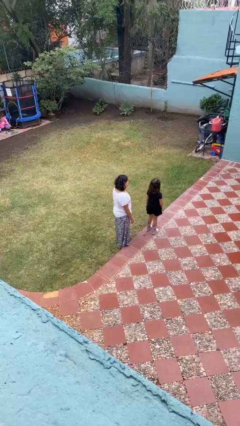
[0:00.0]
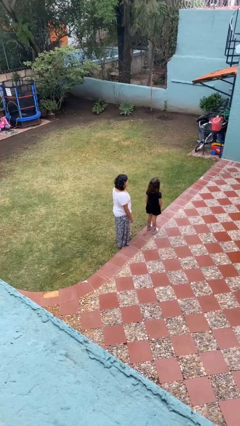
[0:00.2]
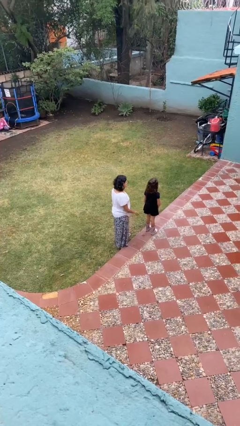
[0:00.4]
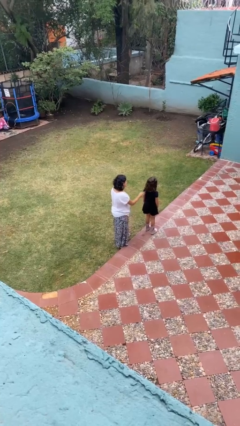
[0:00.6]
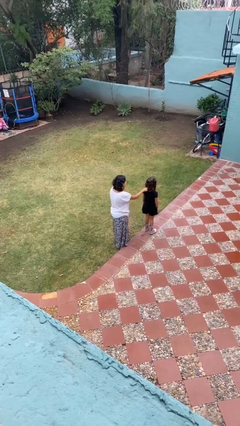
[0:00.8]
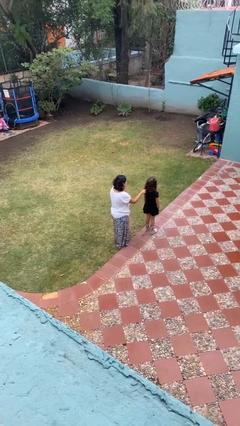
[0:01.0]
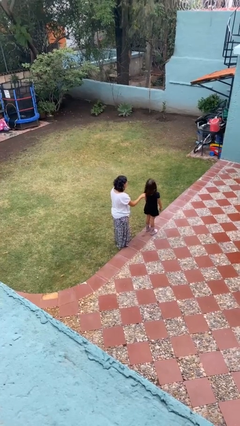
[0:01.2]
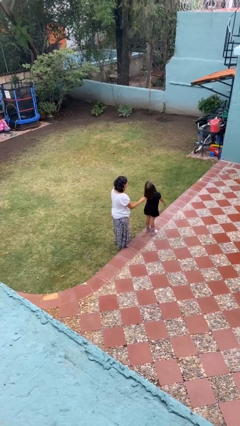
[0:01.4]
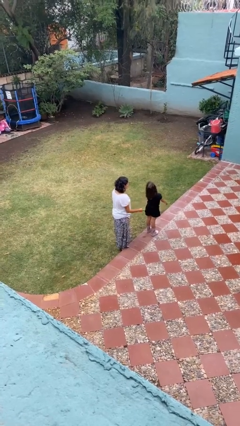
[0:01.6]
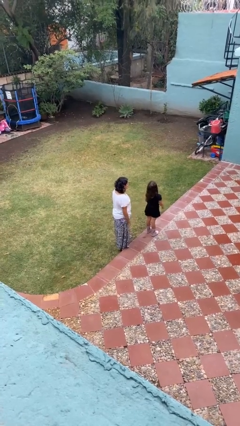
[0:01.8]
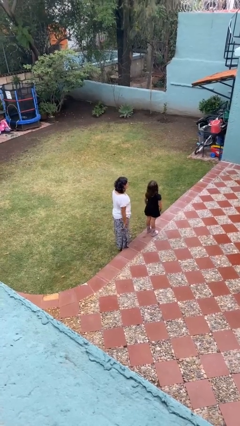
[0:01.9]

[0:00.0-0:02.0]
person grabs person by hair

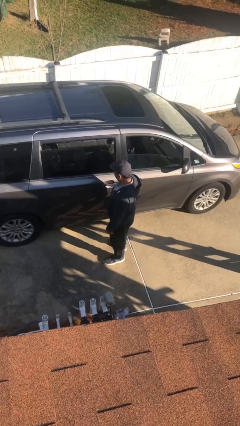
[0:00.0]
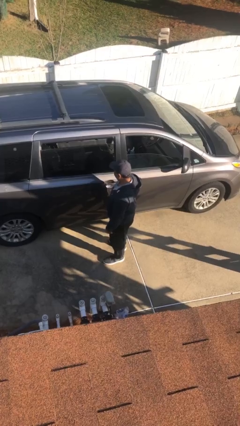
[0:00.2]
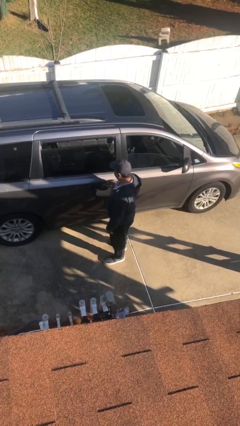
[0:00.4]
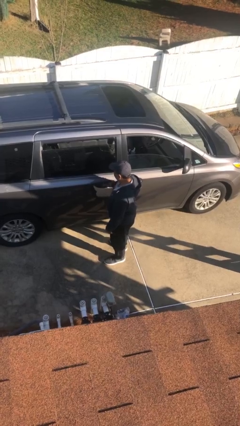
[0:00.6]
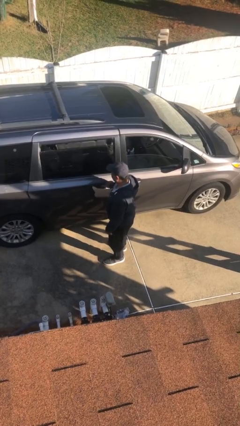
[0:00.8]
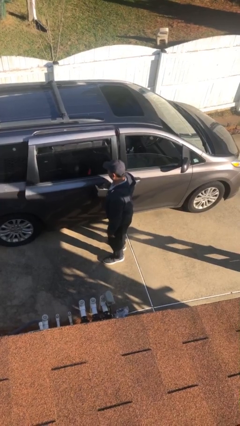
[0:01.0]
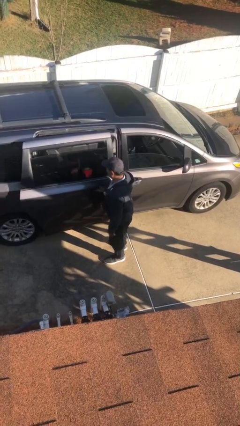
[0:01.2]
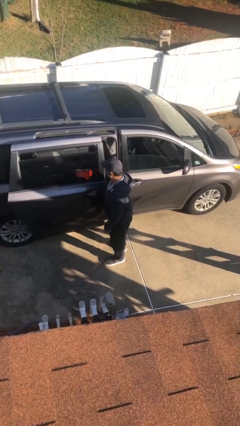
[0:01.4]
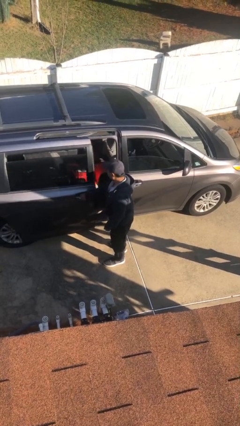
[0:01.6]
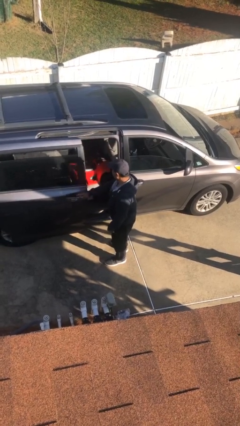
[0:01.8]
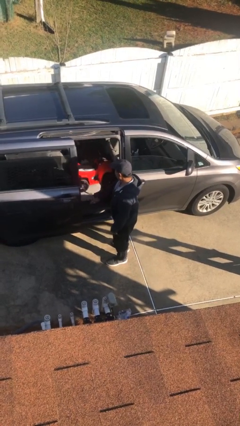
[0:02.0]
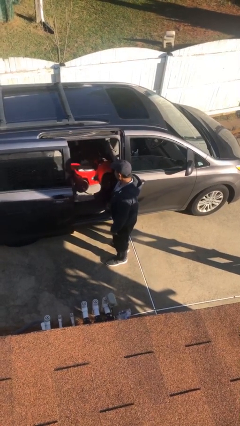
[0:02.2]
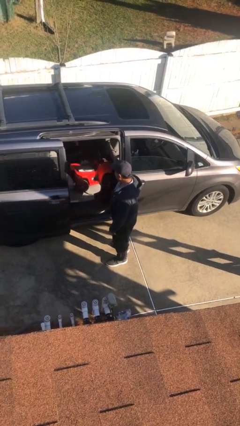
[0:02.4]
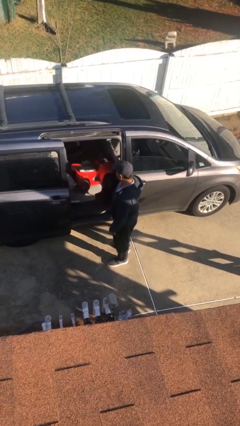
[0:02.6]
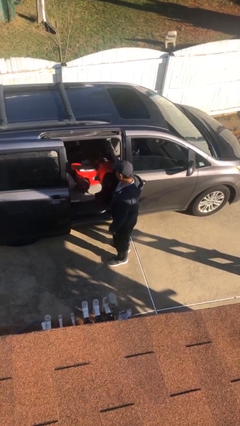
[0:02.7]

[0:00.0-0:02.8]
person opens car door

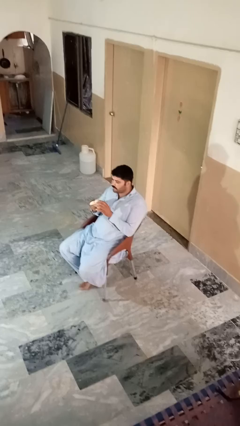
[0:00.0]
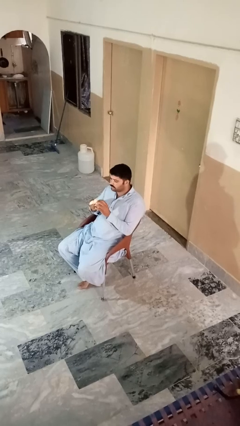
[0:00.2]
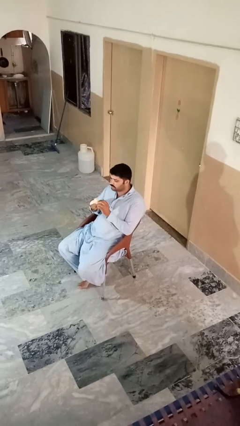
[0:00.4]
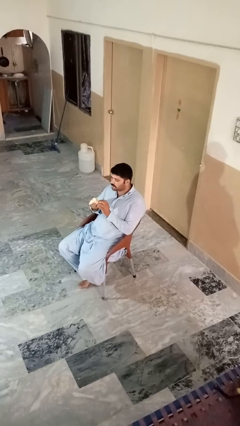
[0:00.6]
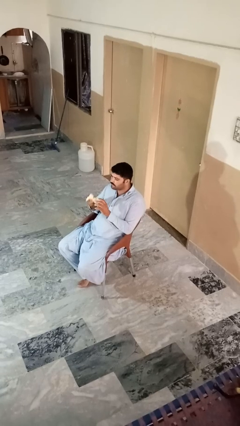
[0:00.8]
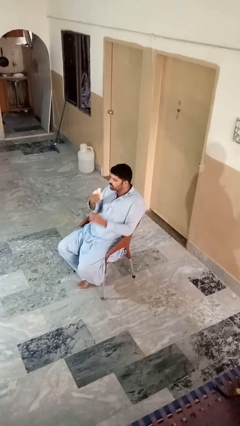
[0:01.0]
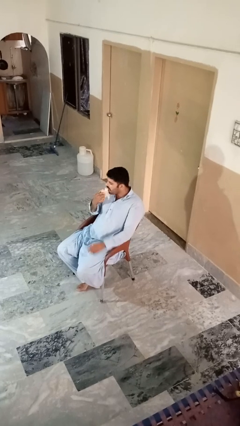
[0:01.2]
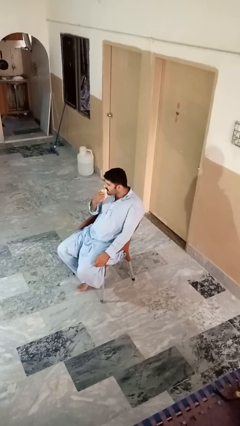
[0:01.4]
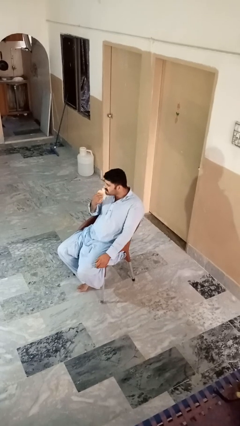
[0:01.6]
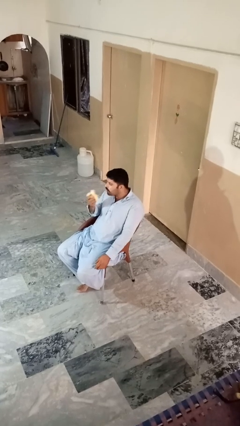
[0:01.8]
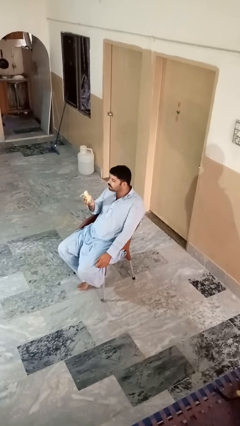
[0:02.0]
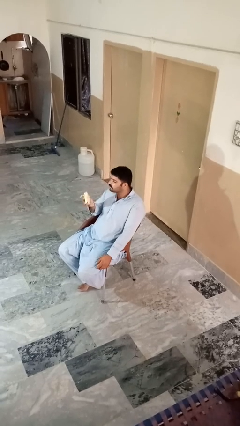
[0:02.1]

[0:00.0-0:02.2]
person eats banana

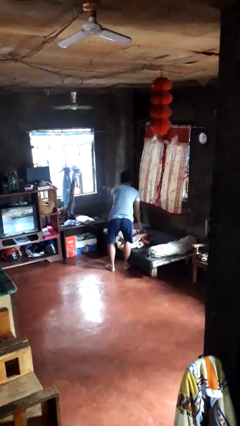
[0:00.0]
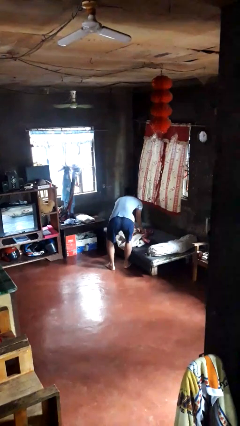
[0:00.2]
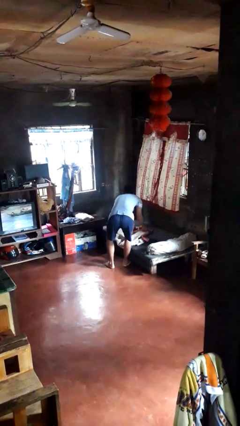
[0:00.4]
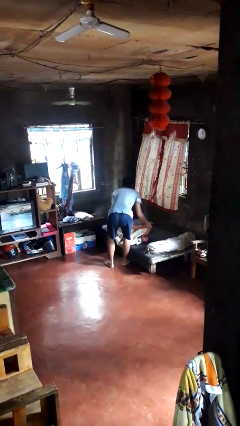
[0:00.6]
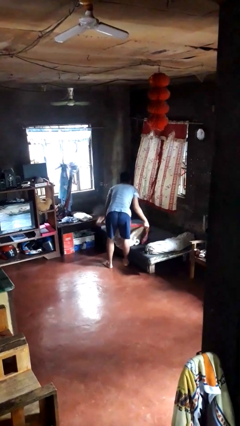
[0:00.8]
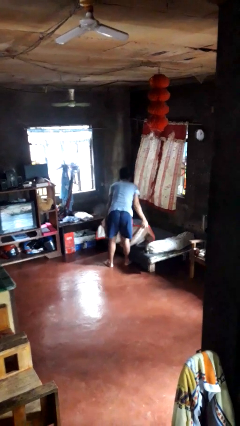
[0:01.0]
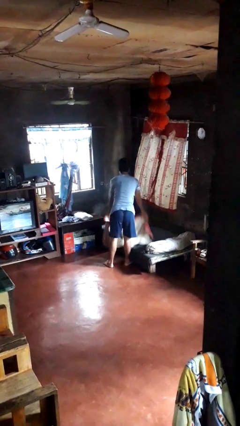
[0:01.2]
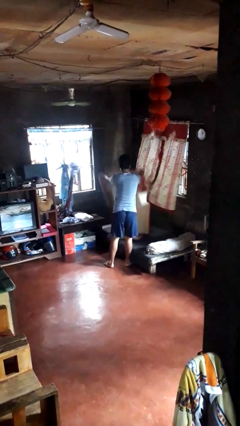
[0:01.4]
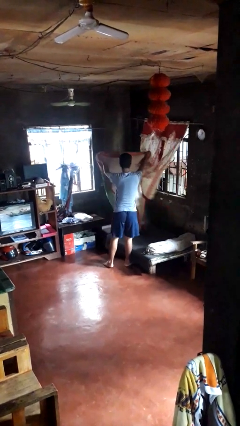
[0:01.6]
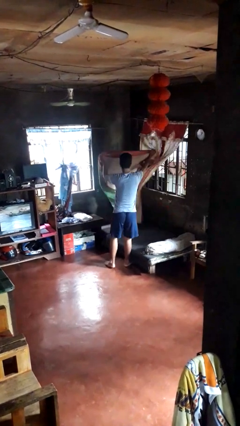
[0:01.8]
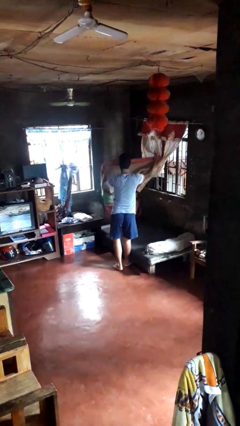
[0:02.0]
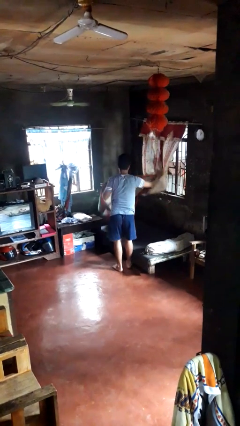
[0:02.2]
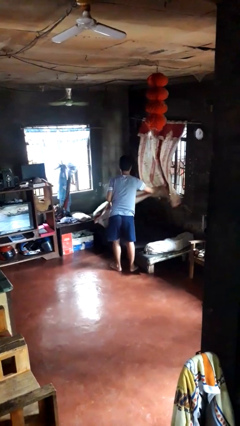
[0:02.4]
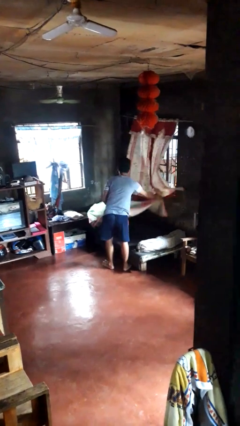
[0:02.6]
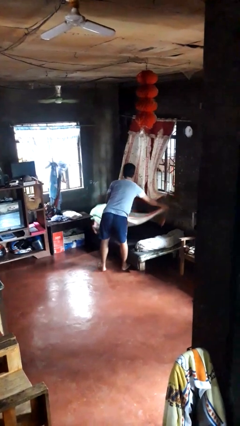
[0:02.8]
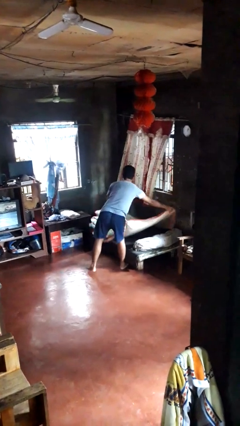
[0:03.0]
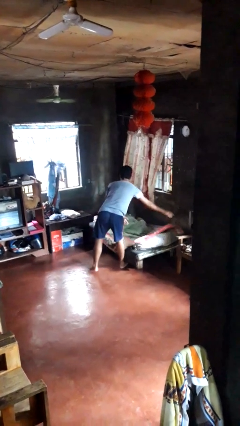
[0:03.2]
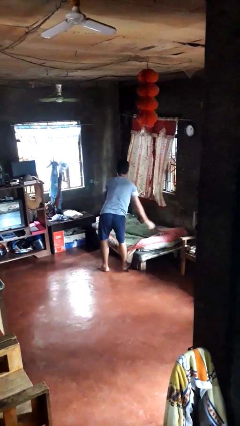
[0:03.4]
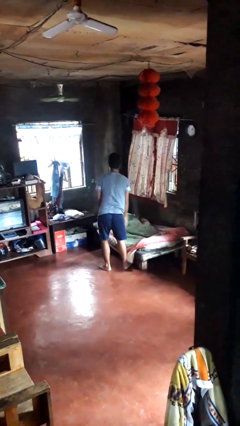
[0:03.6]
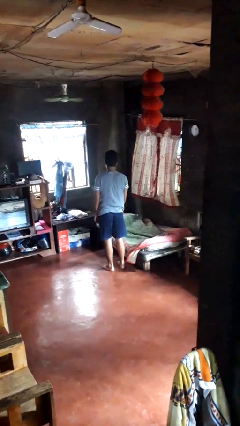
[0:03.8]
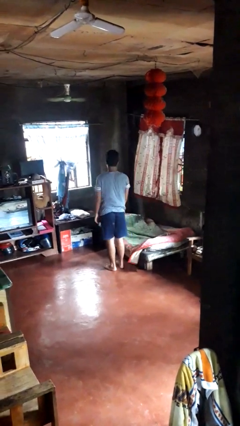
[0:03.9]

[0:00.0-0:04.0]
person makes bed

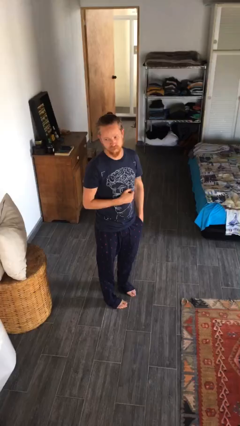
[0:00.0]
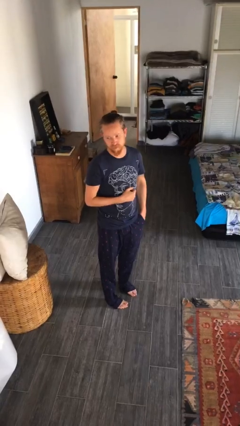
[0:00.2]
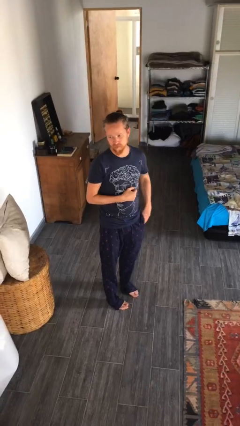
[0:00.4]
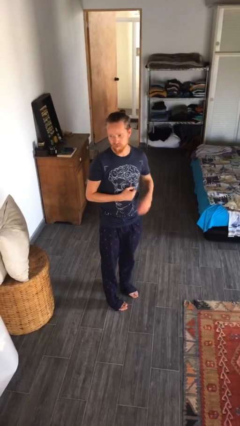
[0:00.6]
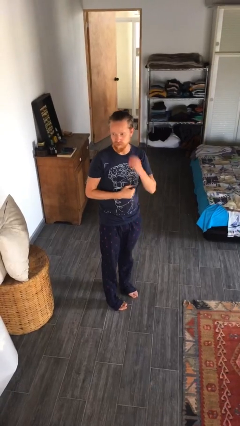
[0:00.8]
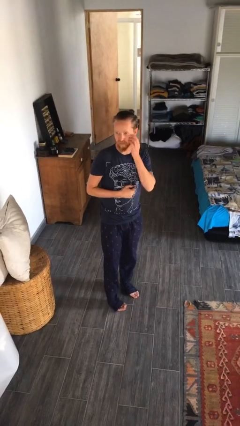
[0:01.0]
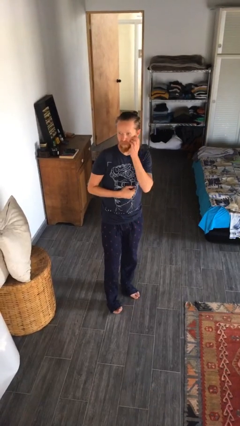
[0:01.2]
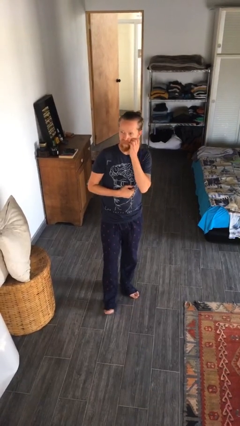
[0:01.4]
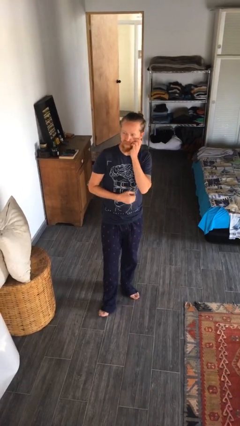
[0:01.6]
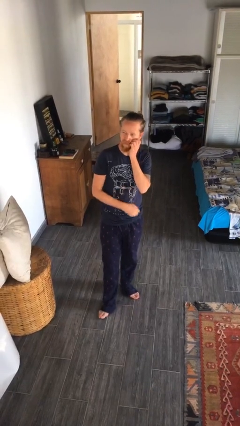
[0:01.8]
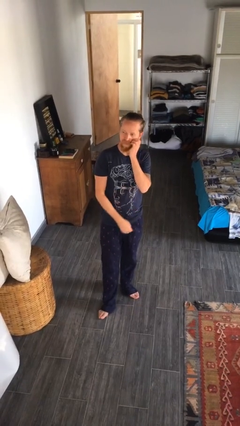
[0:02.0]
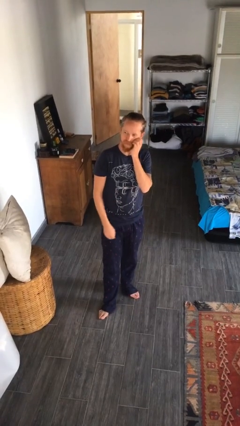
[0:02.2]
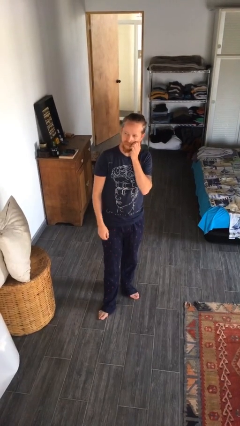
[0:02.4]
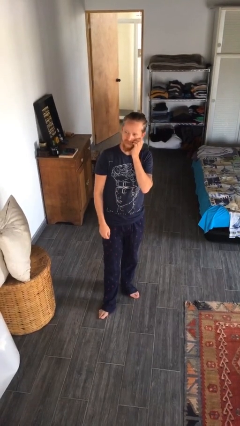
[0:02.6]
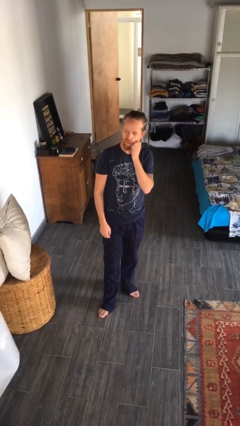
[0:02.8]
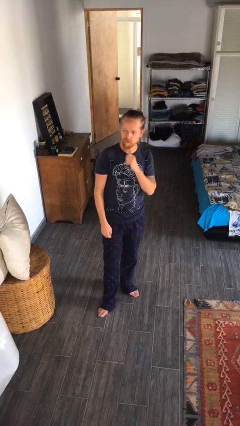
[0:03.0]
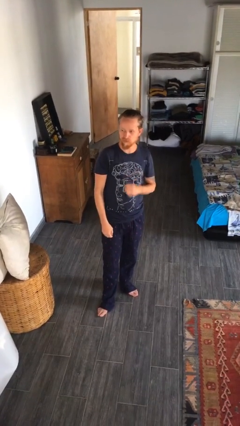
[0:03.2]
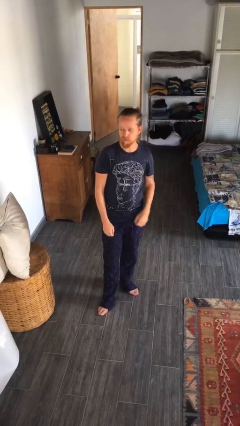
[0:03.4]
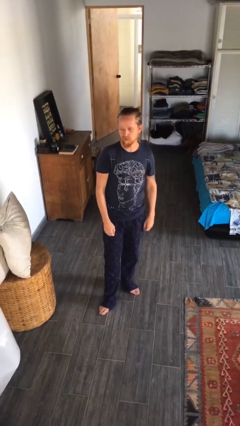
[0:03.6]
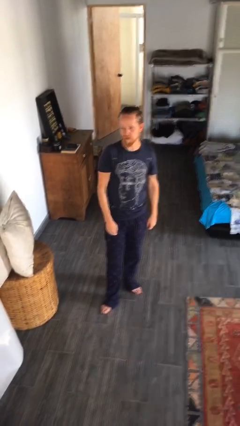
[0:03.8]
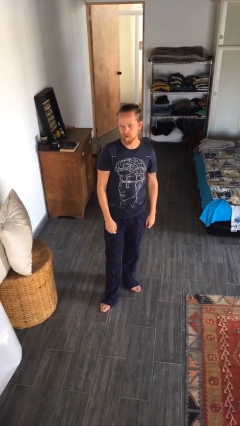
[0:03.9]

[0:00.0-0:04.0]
person scratches face

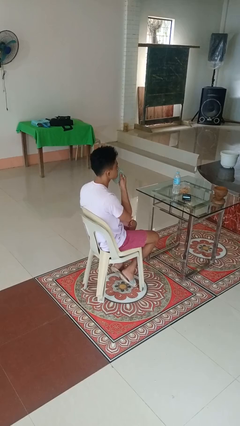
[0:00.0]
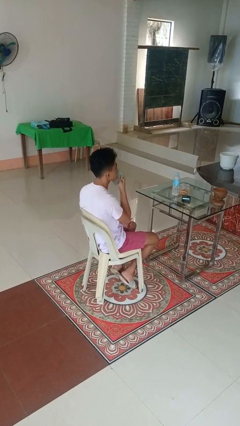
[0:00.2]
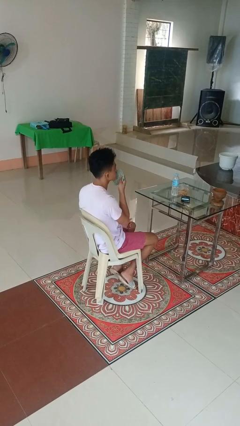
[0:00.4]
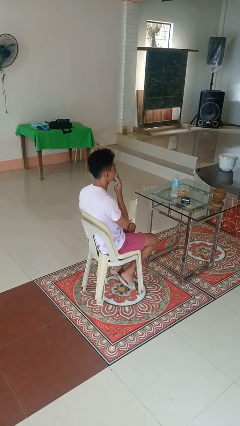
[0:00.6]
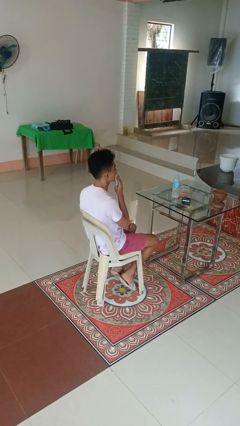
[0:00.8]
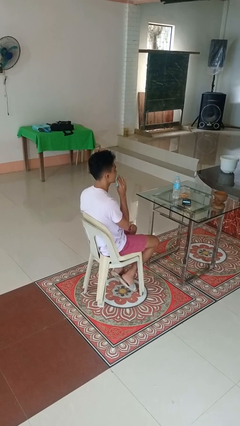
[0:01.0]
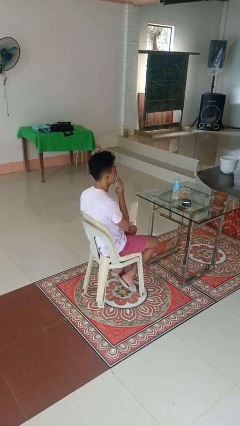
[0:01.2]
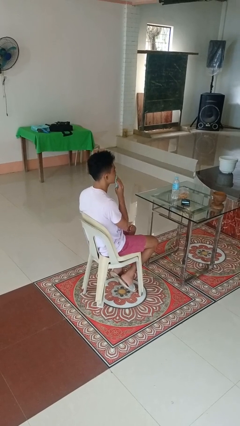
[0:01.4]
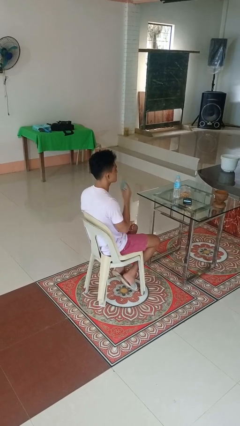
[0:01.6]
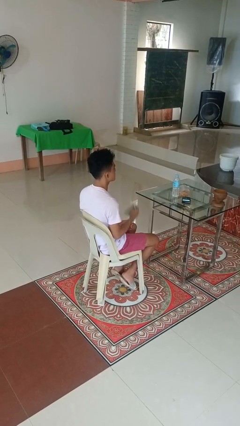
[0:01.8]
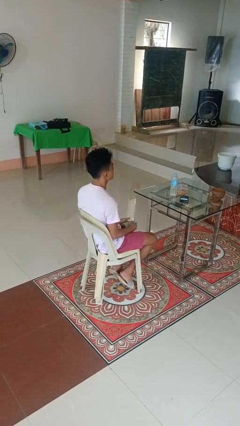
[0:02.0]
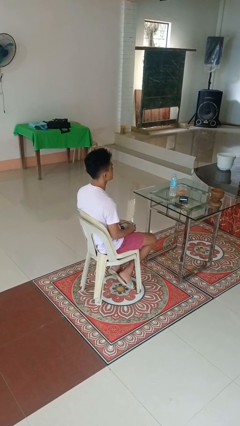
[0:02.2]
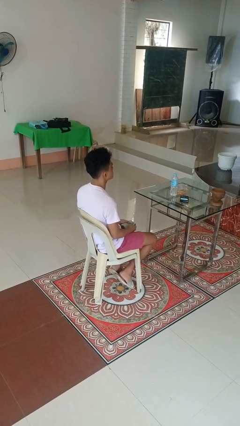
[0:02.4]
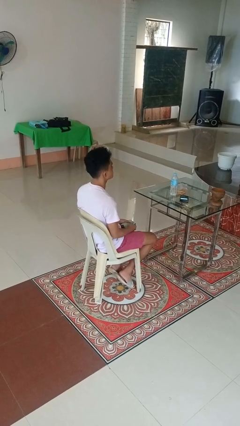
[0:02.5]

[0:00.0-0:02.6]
person wipes mouth with napkin
